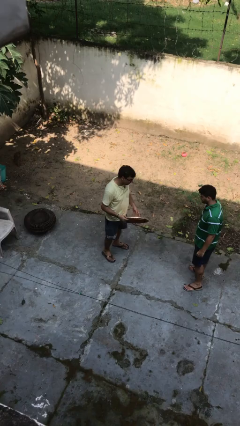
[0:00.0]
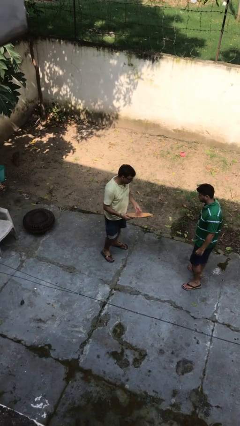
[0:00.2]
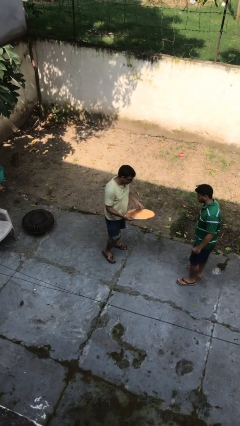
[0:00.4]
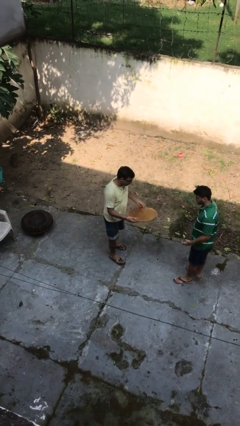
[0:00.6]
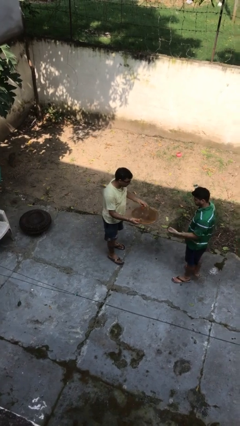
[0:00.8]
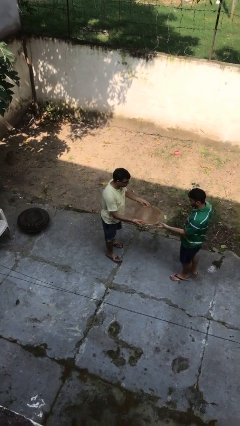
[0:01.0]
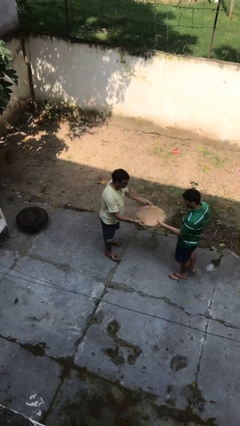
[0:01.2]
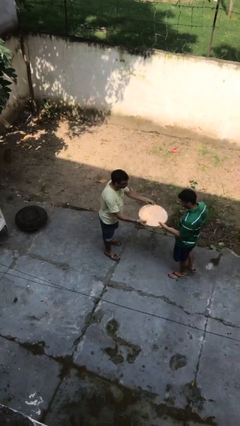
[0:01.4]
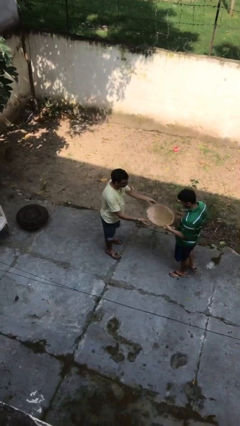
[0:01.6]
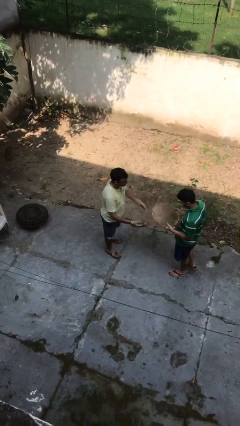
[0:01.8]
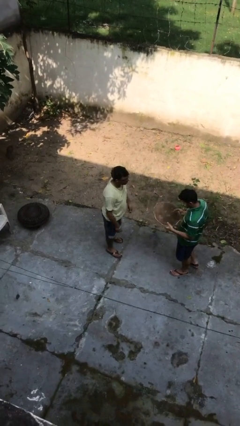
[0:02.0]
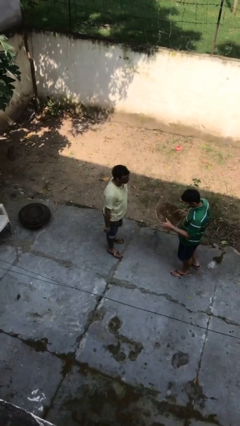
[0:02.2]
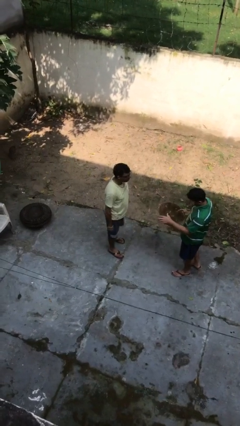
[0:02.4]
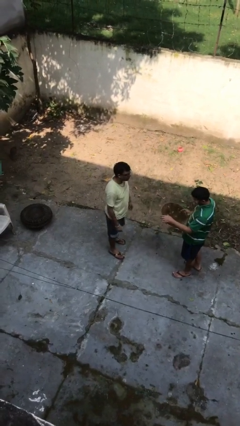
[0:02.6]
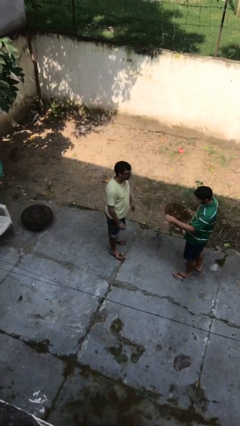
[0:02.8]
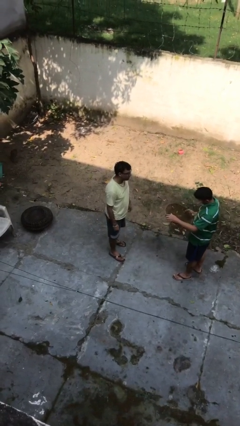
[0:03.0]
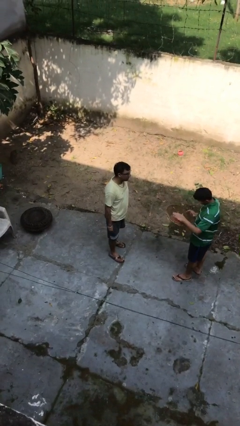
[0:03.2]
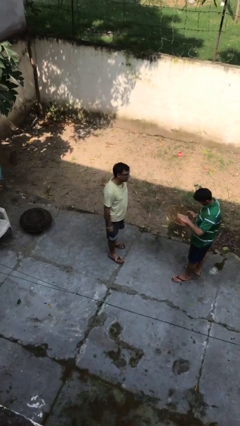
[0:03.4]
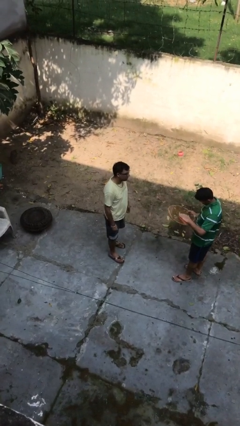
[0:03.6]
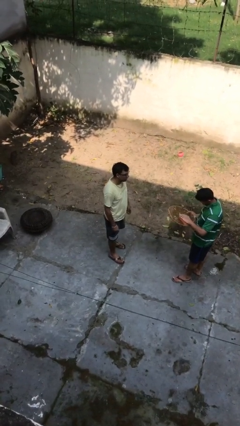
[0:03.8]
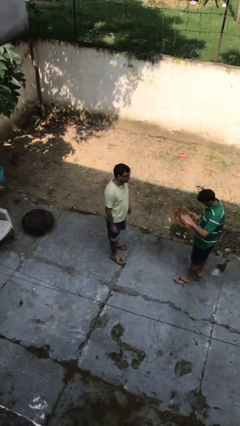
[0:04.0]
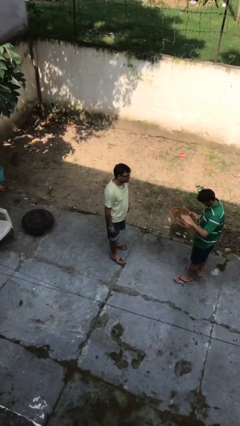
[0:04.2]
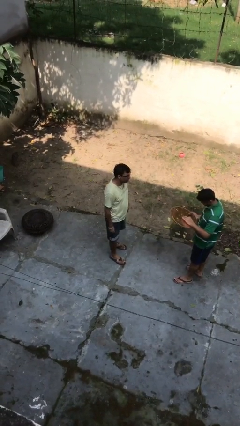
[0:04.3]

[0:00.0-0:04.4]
person transfers object to person

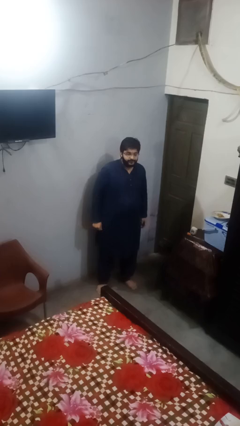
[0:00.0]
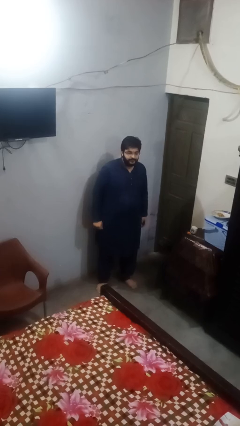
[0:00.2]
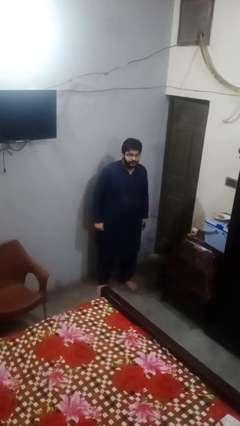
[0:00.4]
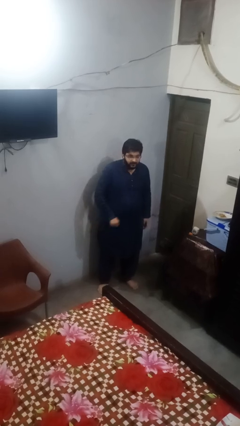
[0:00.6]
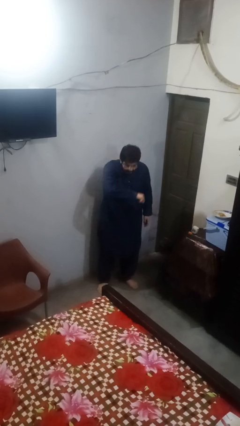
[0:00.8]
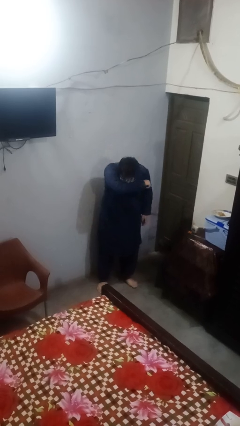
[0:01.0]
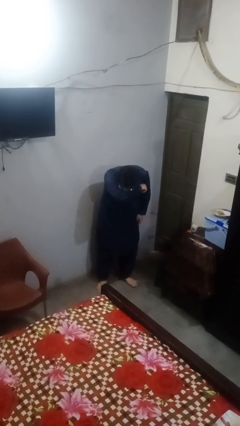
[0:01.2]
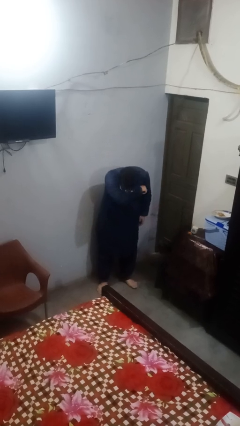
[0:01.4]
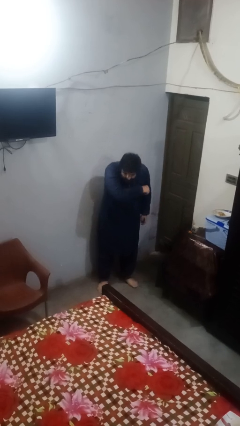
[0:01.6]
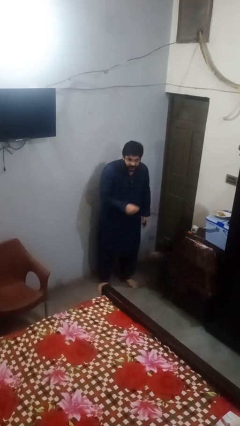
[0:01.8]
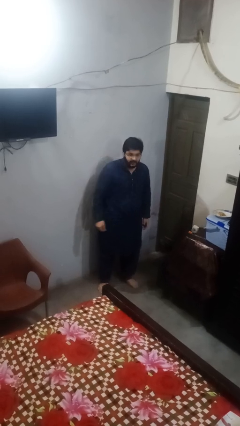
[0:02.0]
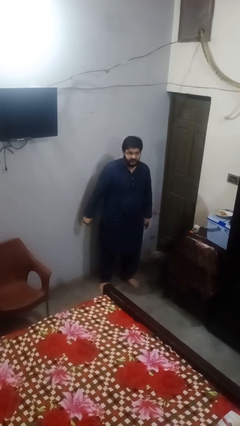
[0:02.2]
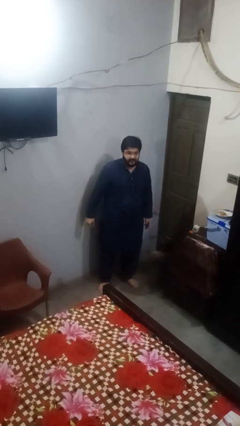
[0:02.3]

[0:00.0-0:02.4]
person sneezes into arm

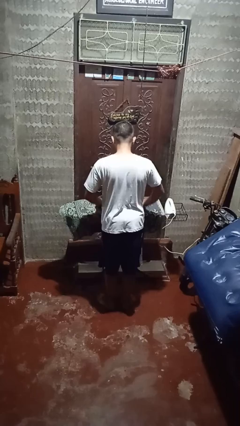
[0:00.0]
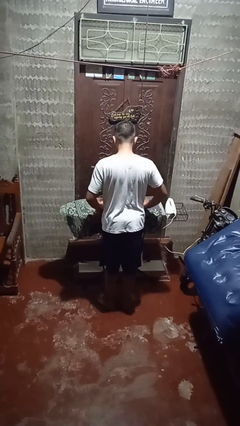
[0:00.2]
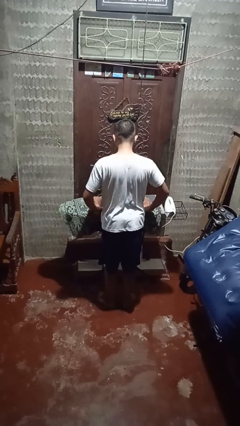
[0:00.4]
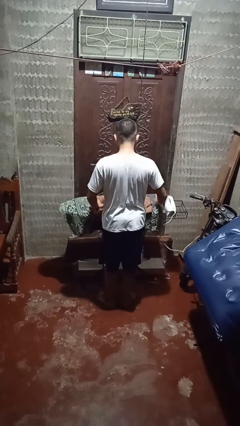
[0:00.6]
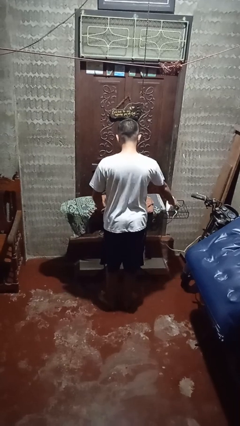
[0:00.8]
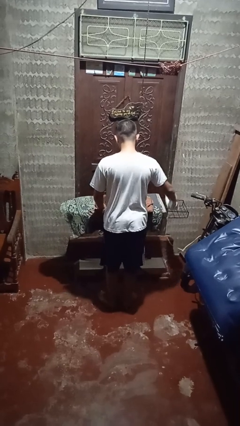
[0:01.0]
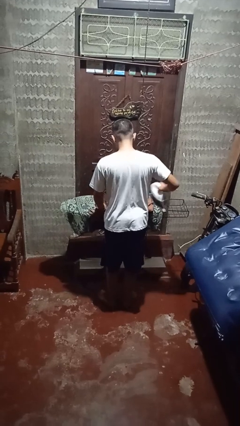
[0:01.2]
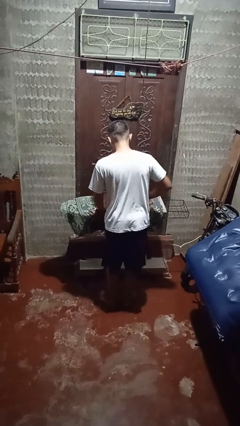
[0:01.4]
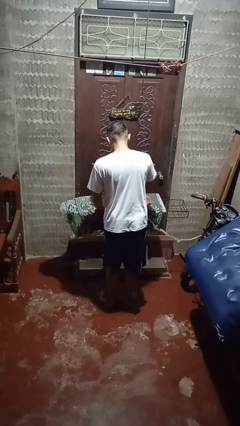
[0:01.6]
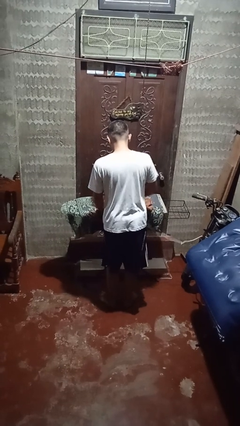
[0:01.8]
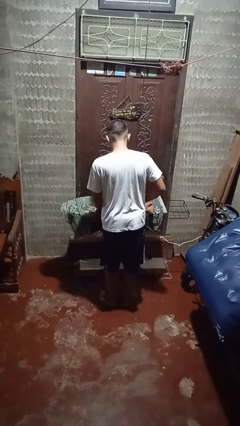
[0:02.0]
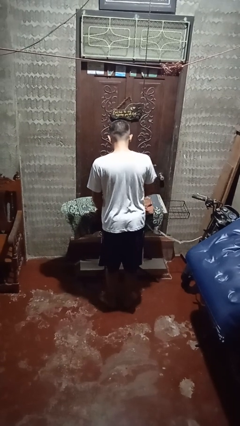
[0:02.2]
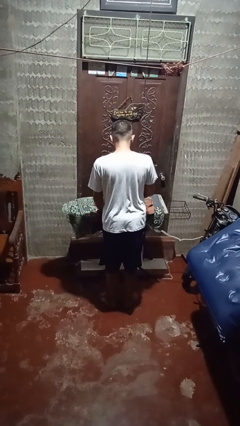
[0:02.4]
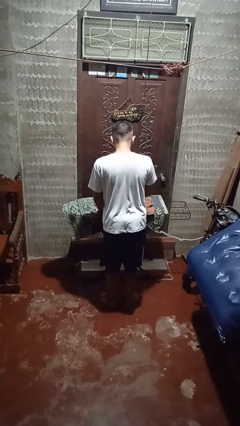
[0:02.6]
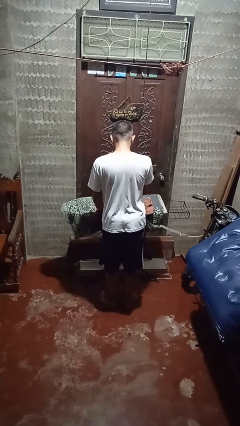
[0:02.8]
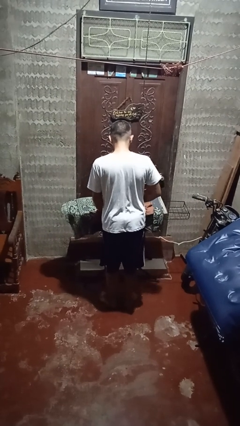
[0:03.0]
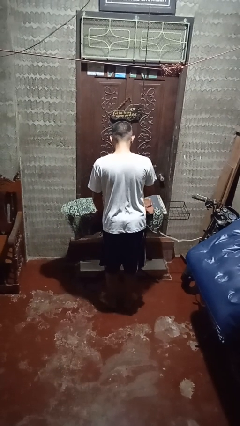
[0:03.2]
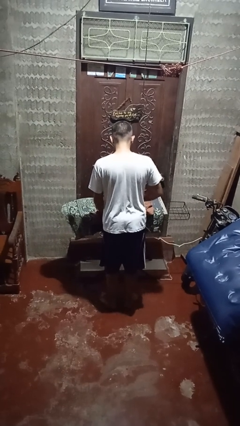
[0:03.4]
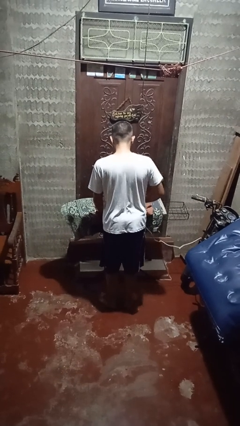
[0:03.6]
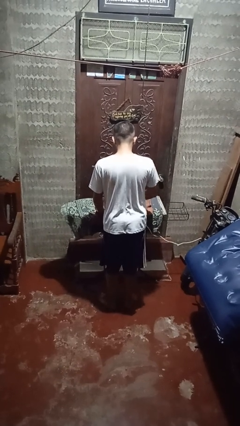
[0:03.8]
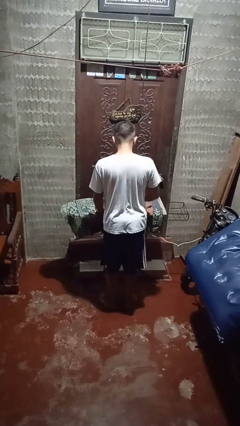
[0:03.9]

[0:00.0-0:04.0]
person irons clothes

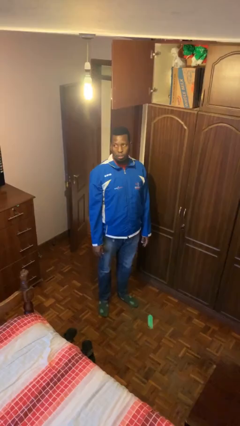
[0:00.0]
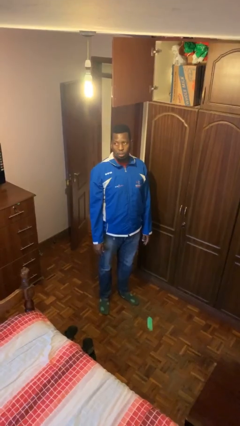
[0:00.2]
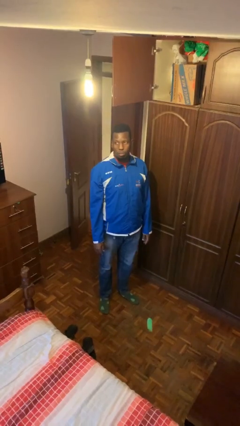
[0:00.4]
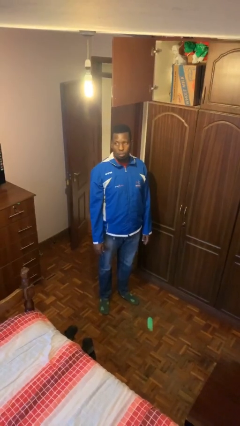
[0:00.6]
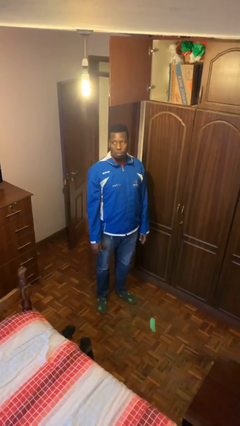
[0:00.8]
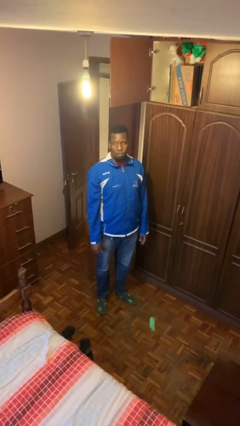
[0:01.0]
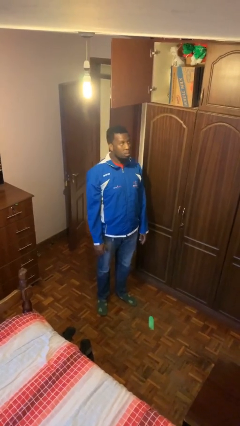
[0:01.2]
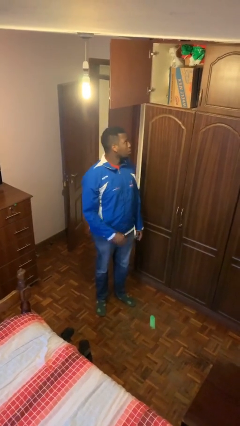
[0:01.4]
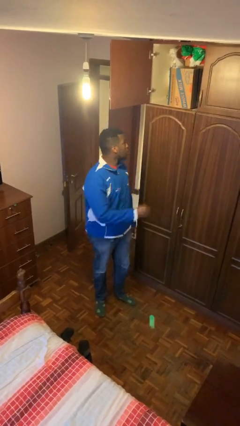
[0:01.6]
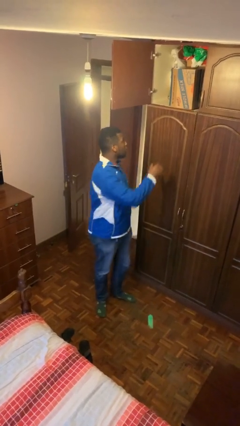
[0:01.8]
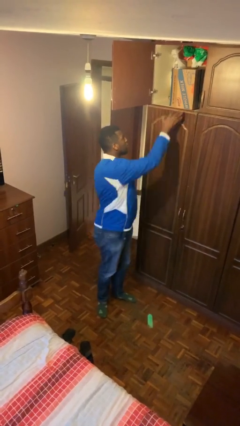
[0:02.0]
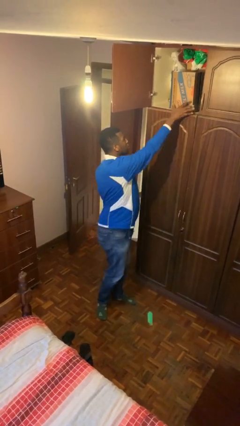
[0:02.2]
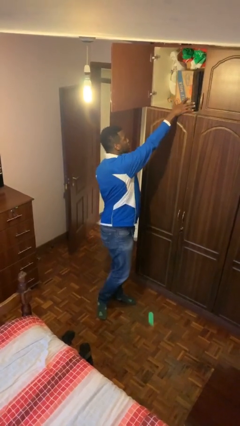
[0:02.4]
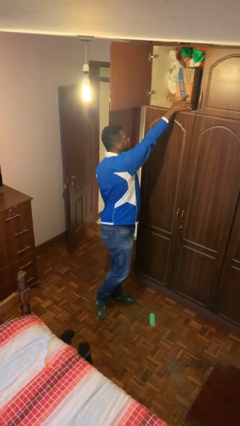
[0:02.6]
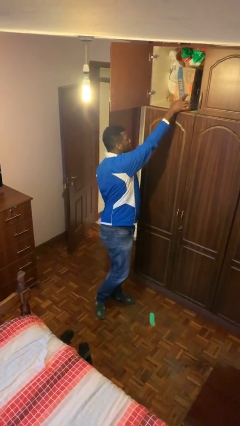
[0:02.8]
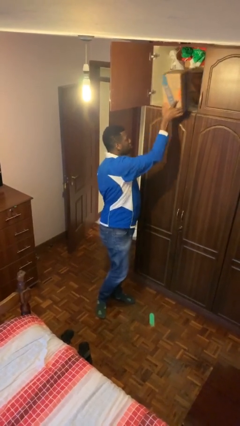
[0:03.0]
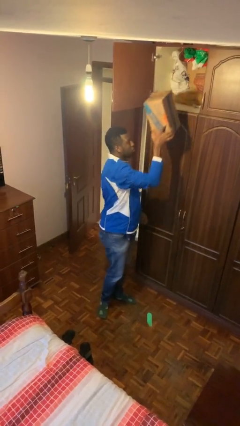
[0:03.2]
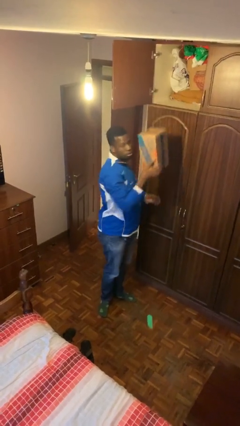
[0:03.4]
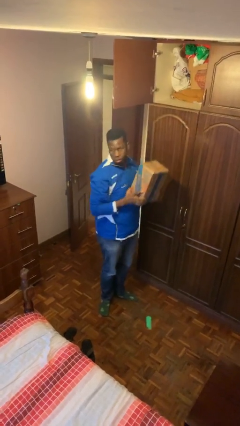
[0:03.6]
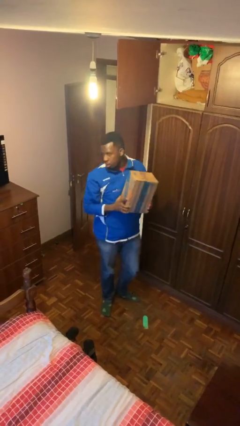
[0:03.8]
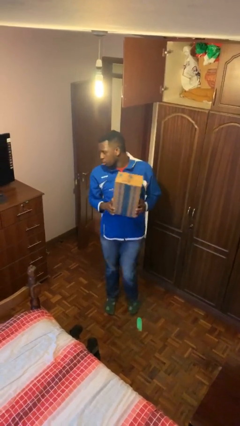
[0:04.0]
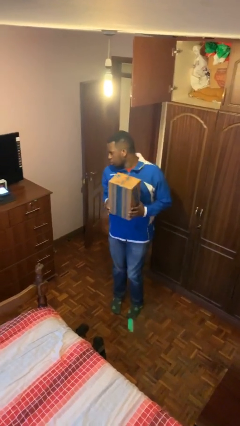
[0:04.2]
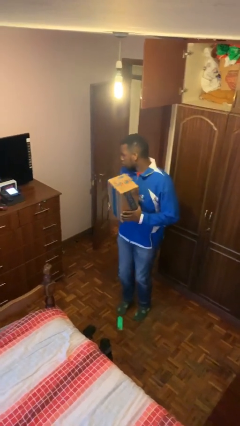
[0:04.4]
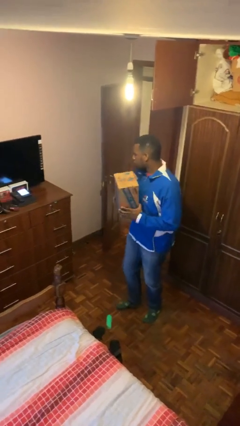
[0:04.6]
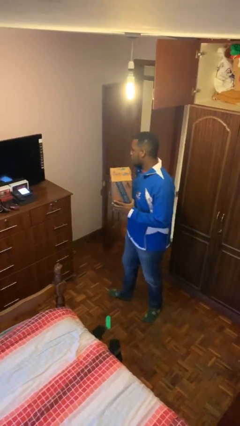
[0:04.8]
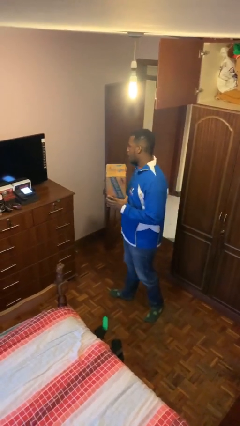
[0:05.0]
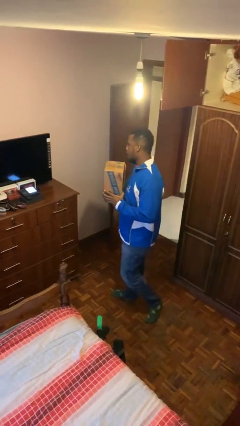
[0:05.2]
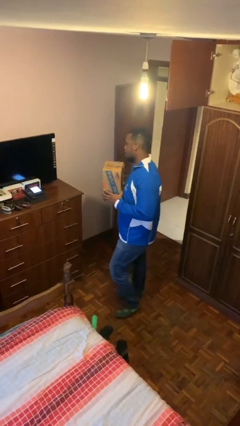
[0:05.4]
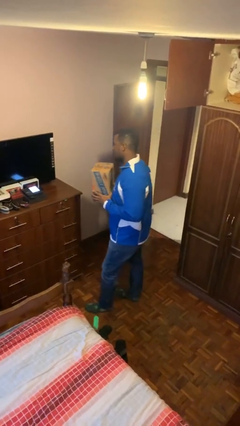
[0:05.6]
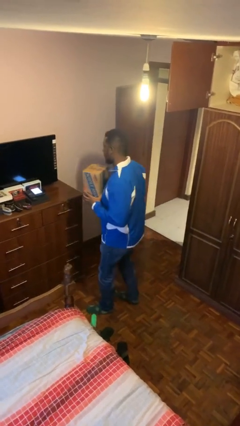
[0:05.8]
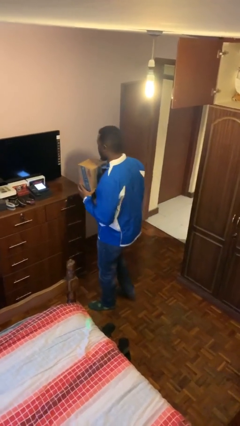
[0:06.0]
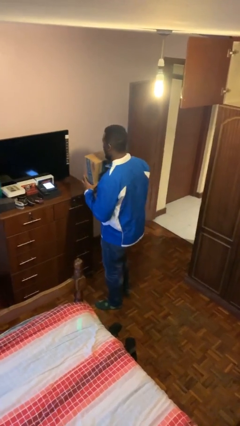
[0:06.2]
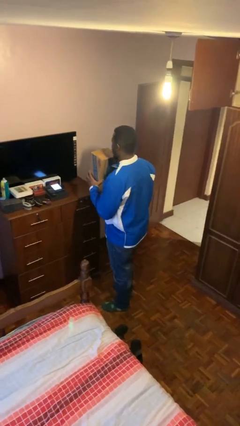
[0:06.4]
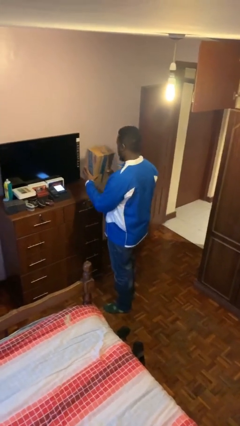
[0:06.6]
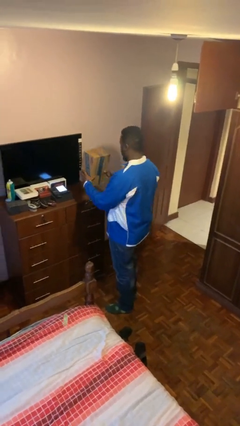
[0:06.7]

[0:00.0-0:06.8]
person picks up object from shelf
